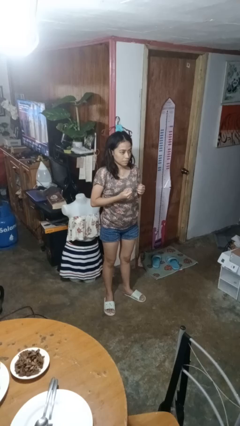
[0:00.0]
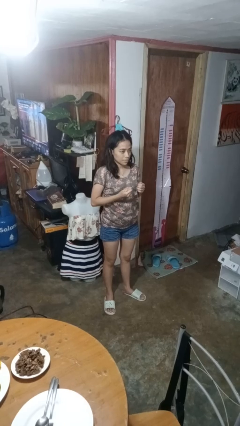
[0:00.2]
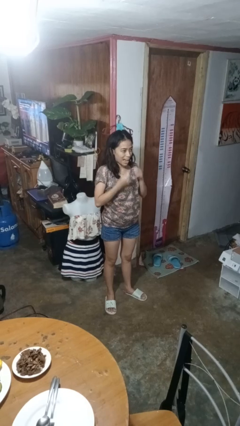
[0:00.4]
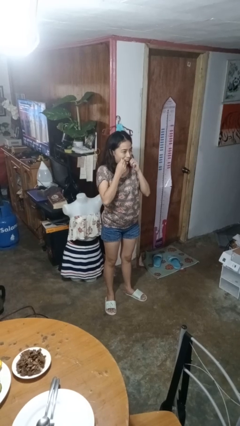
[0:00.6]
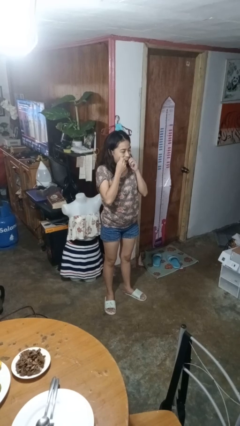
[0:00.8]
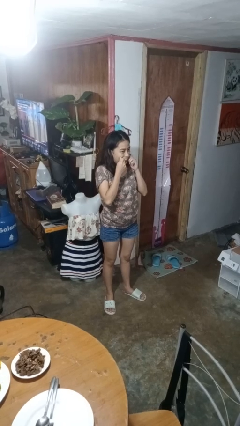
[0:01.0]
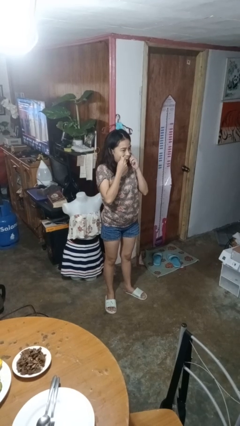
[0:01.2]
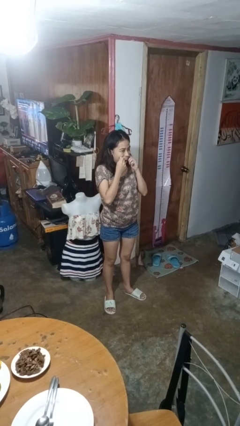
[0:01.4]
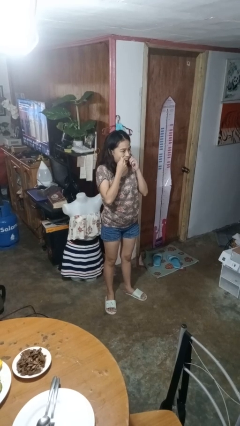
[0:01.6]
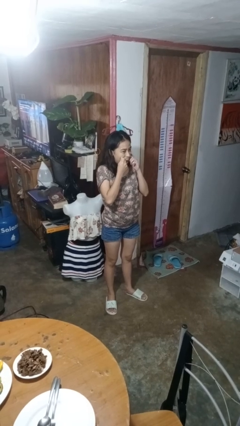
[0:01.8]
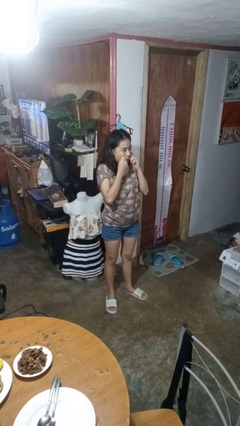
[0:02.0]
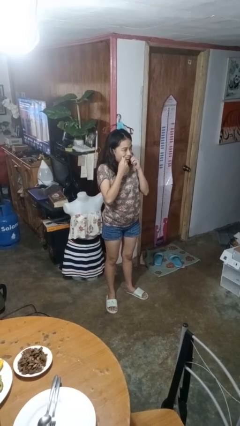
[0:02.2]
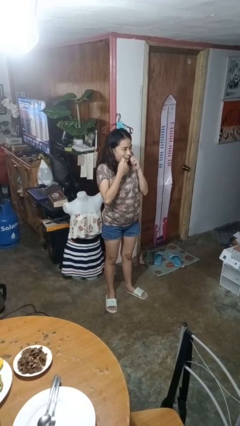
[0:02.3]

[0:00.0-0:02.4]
person flosses

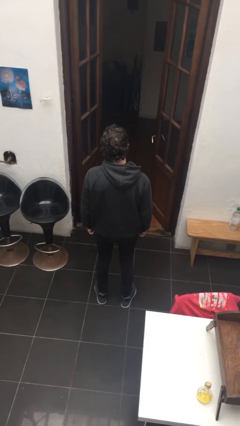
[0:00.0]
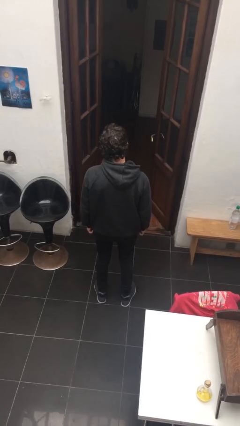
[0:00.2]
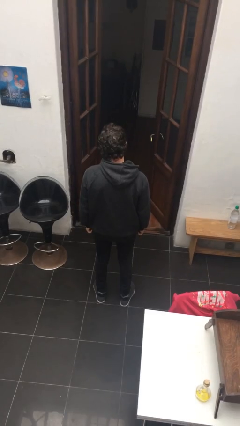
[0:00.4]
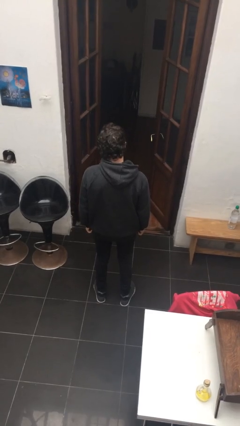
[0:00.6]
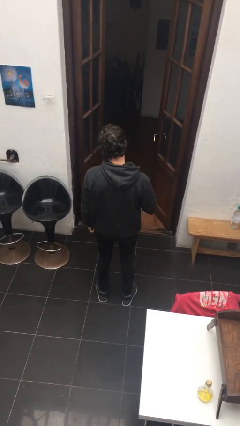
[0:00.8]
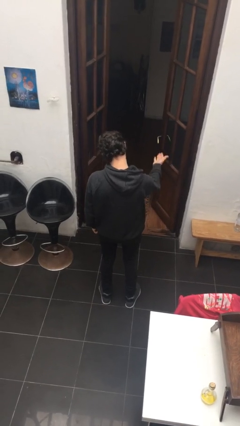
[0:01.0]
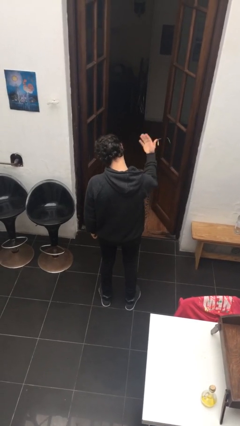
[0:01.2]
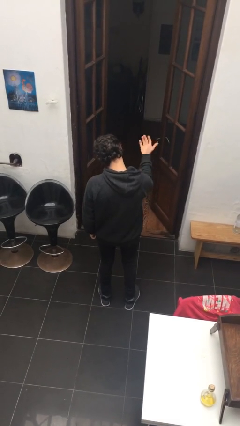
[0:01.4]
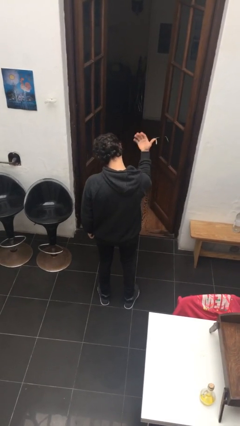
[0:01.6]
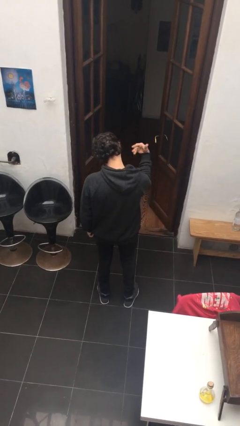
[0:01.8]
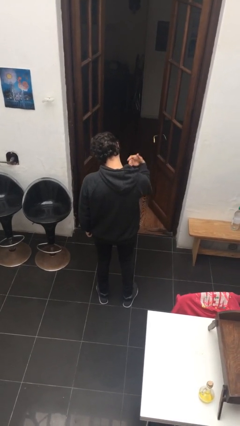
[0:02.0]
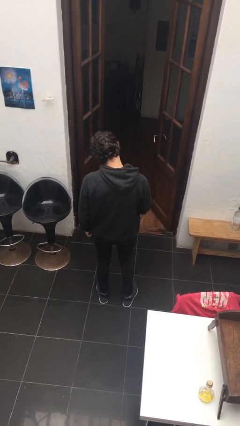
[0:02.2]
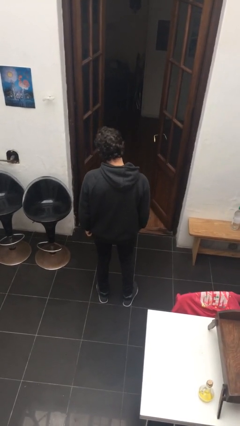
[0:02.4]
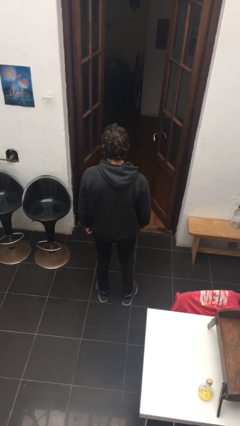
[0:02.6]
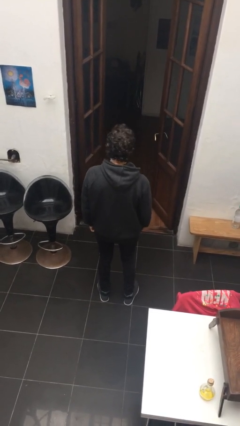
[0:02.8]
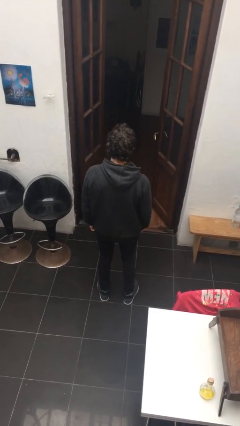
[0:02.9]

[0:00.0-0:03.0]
person gestures come here

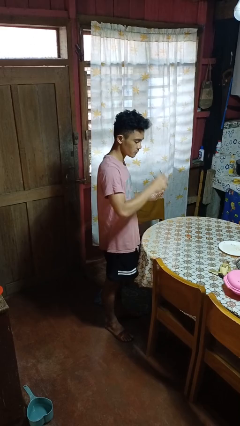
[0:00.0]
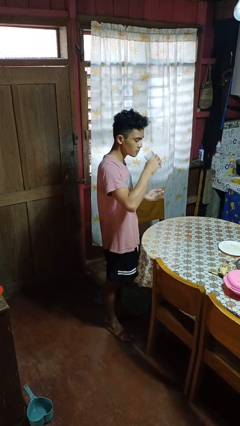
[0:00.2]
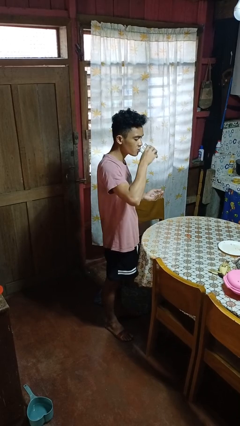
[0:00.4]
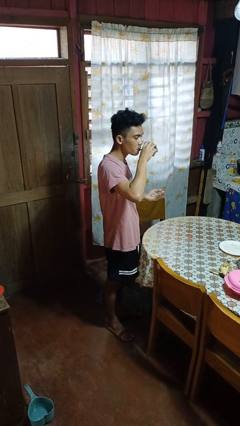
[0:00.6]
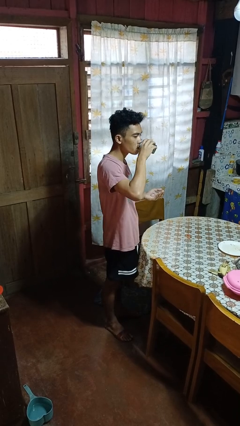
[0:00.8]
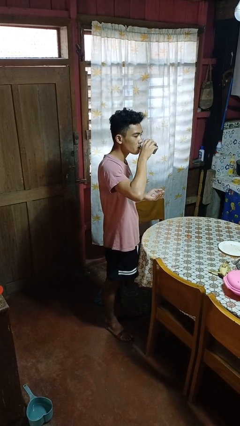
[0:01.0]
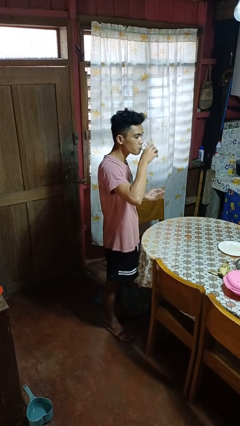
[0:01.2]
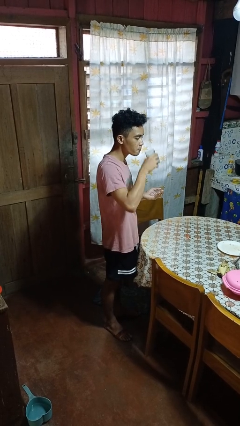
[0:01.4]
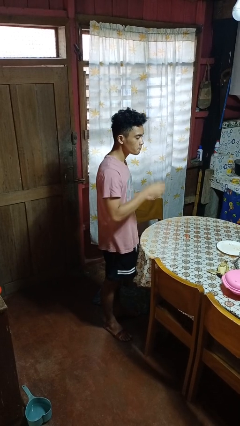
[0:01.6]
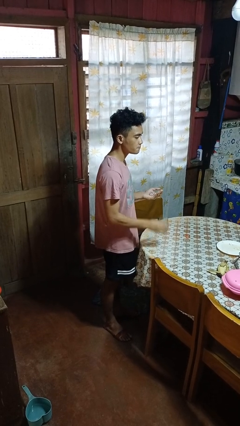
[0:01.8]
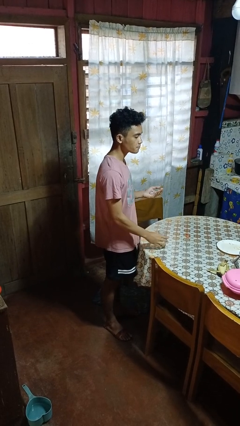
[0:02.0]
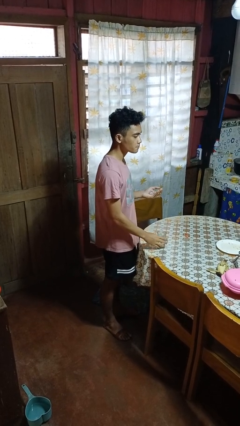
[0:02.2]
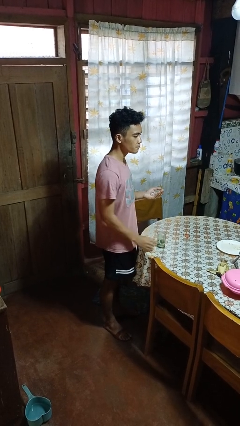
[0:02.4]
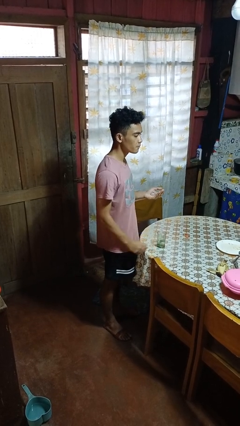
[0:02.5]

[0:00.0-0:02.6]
person drinks from cup

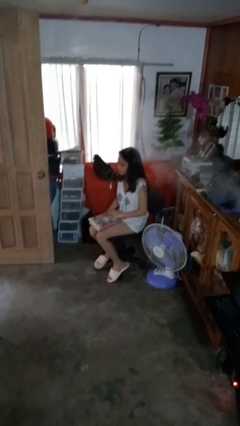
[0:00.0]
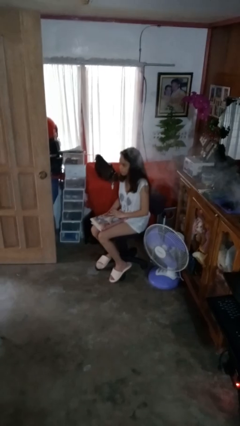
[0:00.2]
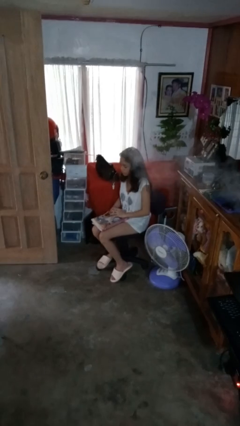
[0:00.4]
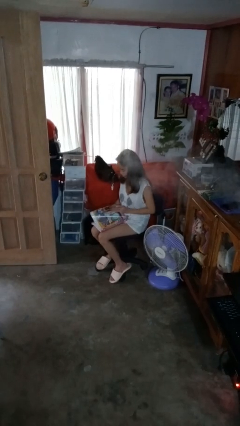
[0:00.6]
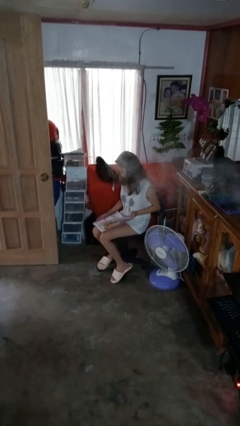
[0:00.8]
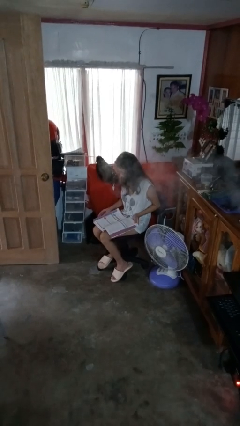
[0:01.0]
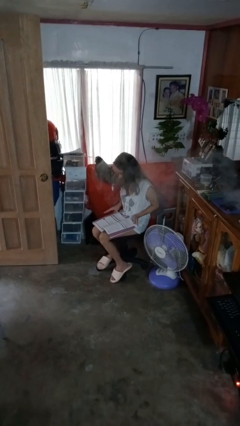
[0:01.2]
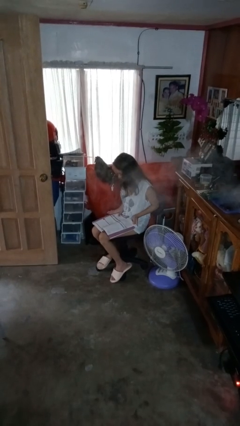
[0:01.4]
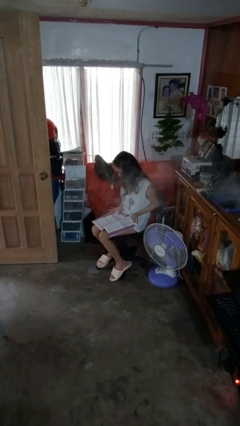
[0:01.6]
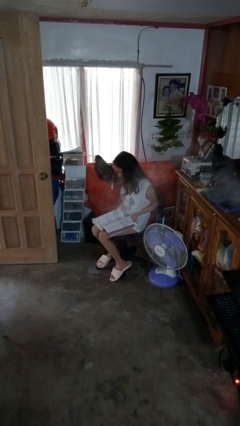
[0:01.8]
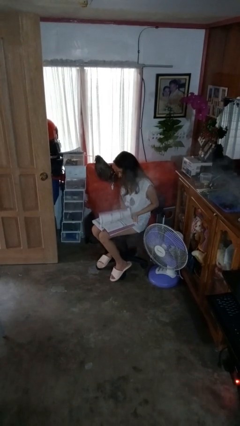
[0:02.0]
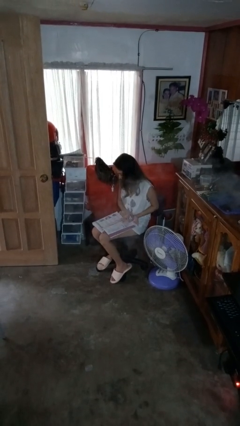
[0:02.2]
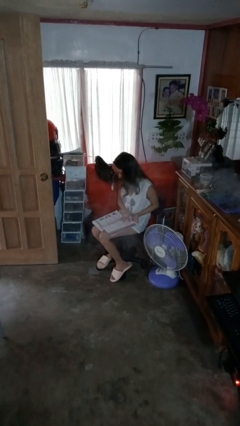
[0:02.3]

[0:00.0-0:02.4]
person reads book

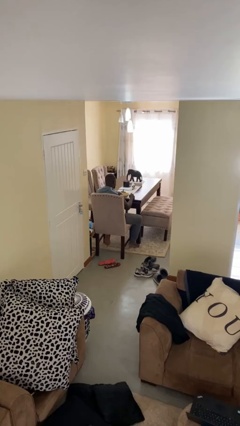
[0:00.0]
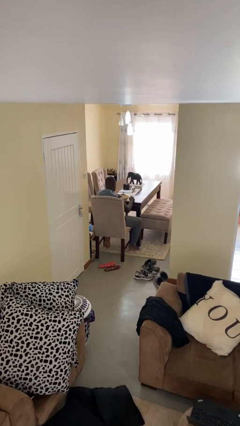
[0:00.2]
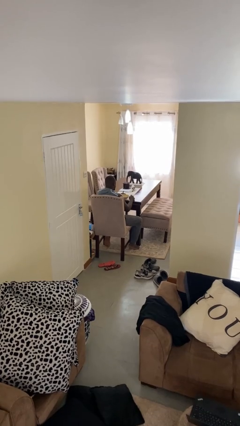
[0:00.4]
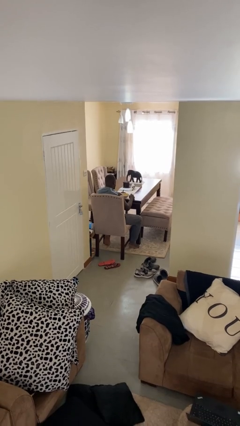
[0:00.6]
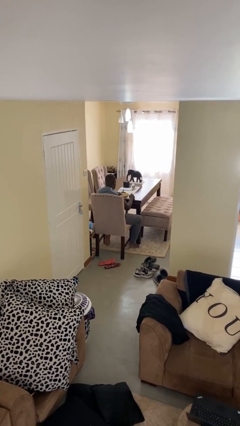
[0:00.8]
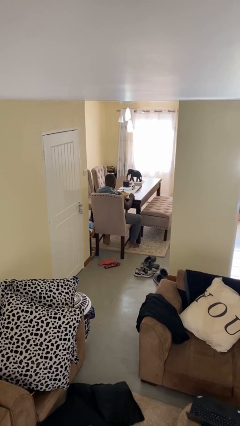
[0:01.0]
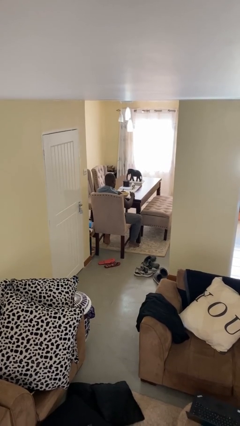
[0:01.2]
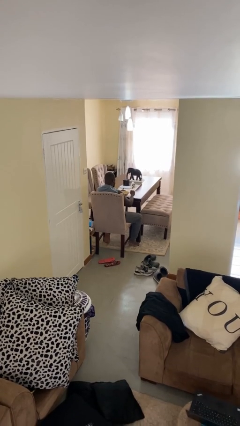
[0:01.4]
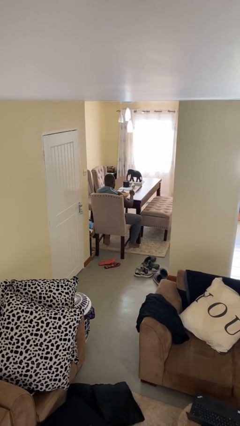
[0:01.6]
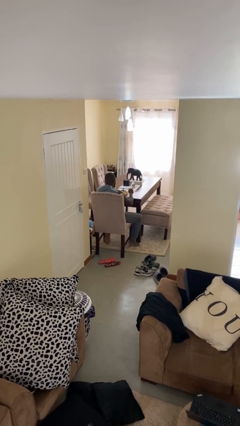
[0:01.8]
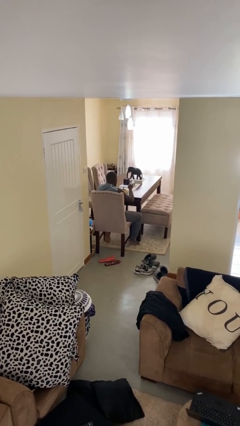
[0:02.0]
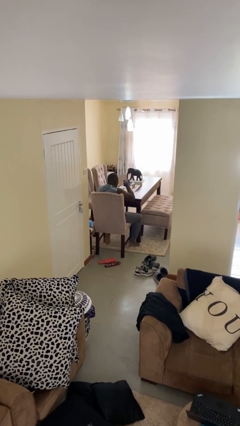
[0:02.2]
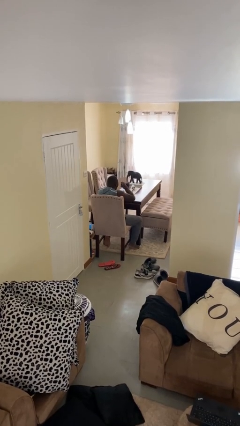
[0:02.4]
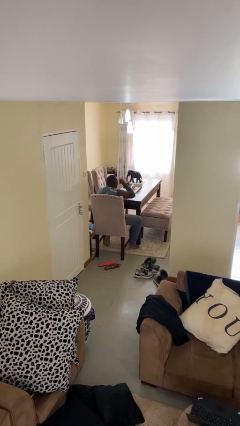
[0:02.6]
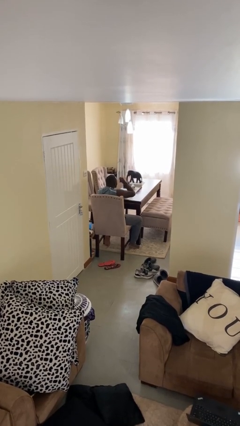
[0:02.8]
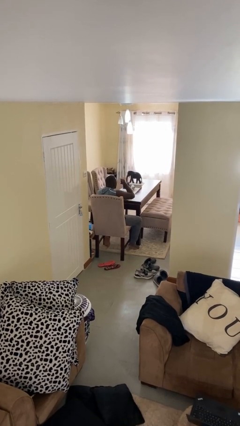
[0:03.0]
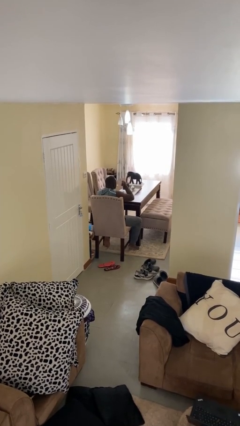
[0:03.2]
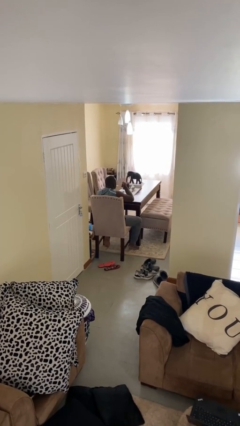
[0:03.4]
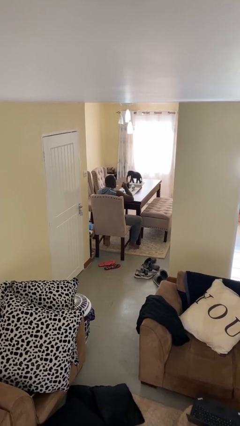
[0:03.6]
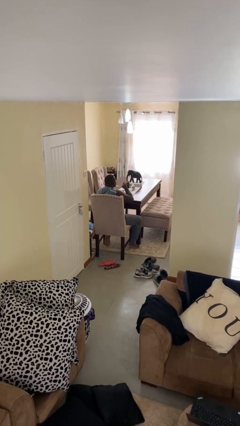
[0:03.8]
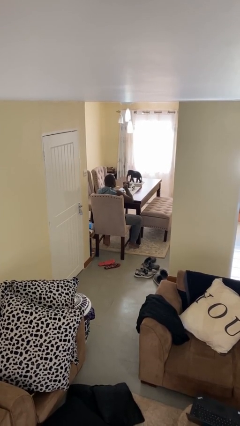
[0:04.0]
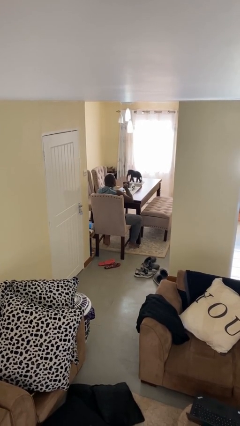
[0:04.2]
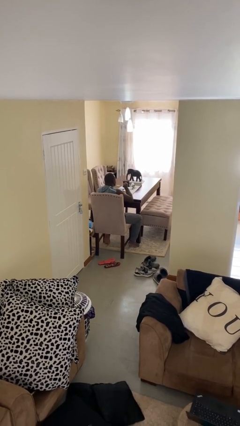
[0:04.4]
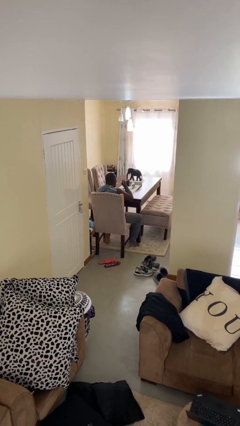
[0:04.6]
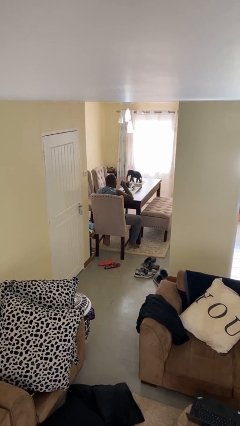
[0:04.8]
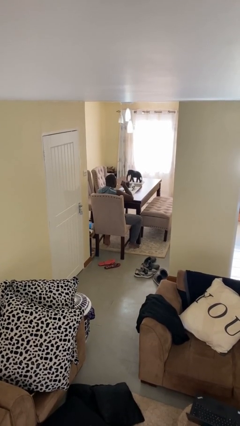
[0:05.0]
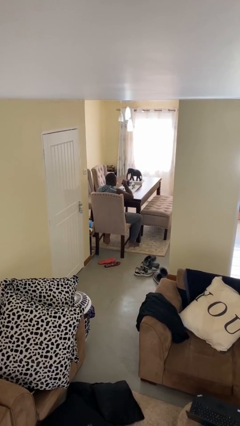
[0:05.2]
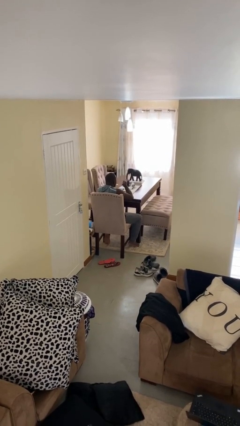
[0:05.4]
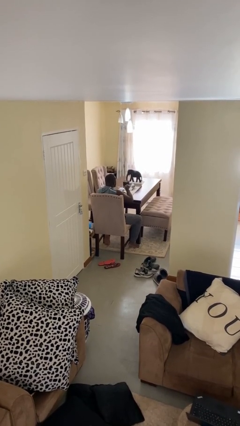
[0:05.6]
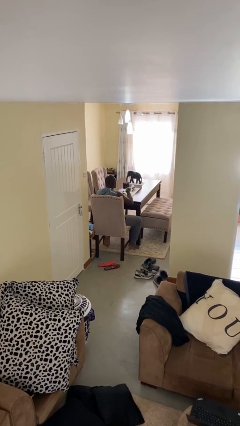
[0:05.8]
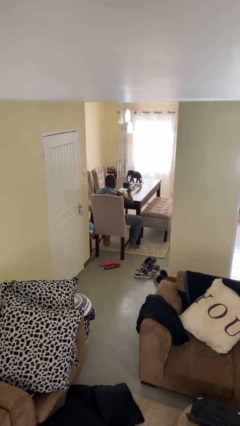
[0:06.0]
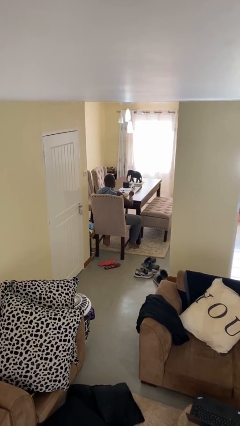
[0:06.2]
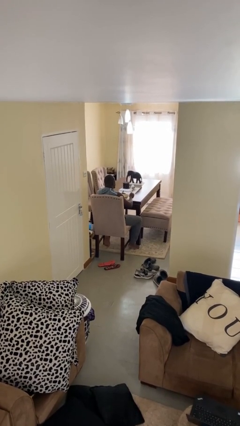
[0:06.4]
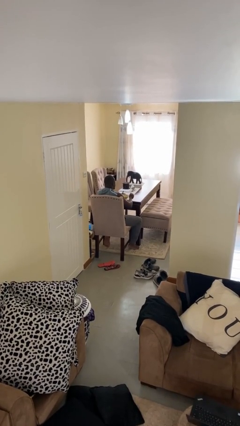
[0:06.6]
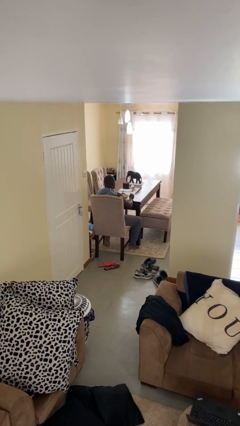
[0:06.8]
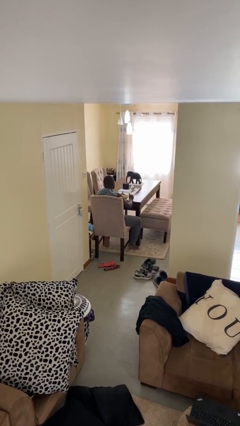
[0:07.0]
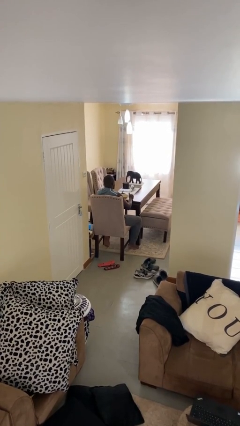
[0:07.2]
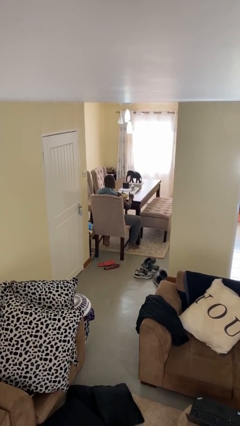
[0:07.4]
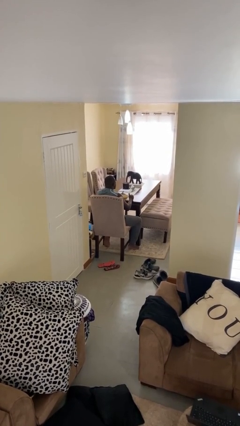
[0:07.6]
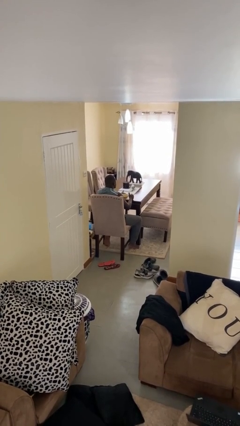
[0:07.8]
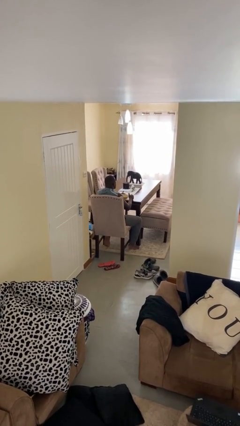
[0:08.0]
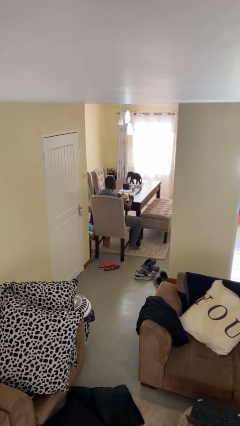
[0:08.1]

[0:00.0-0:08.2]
person eats with utensil
